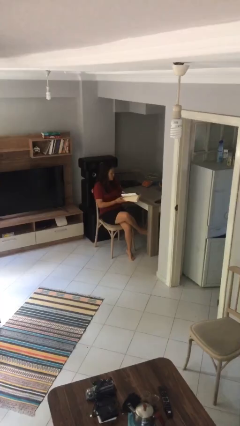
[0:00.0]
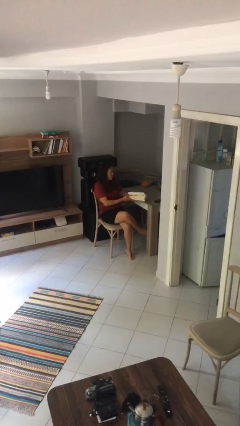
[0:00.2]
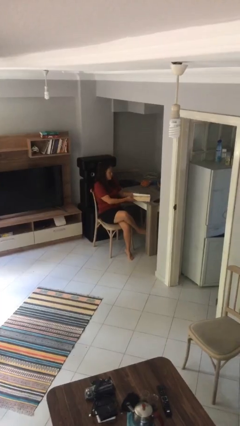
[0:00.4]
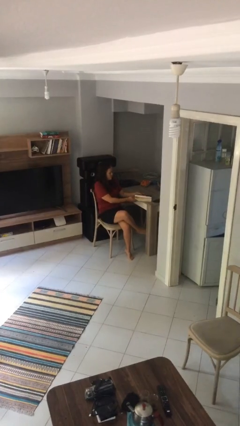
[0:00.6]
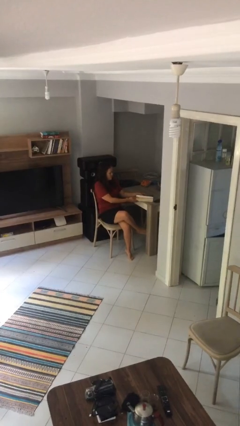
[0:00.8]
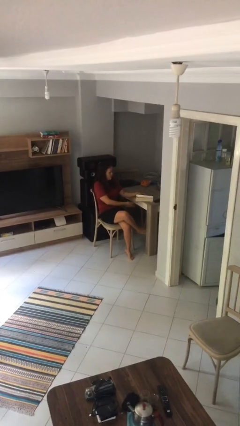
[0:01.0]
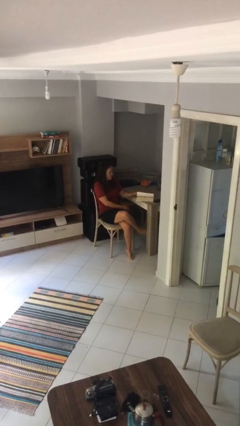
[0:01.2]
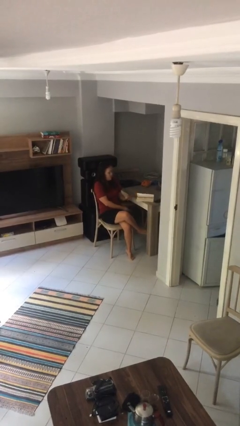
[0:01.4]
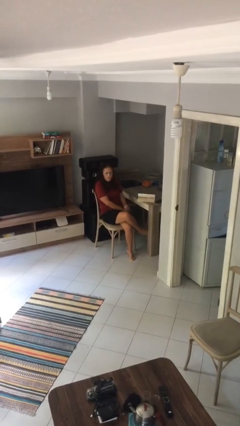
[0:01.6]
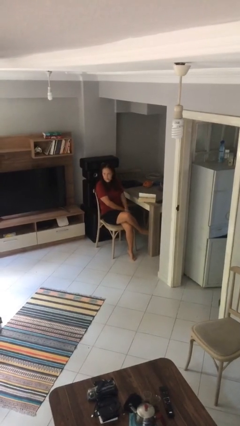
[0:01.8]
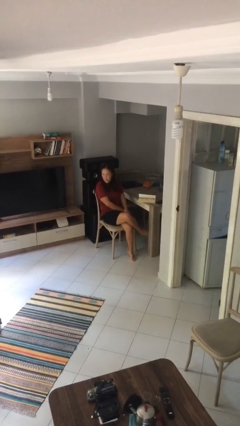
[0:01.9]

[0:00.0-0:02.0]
person puts down object on table

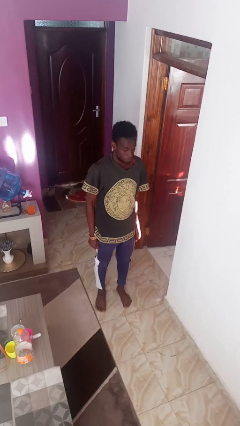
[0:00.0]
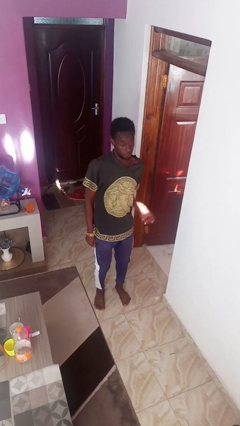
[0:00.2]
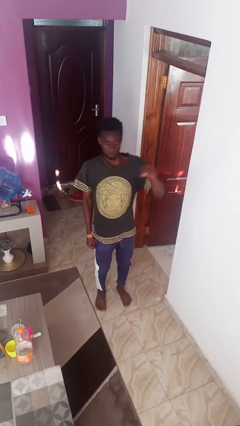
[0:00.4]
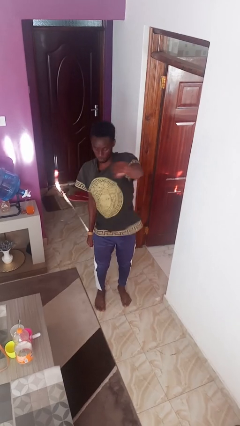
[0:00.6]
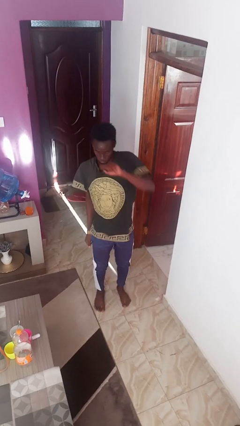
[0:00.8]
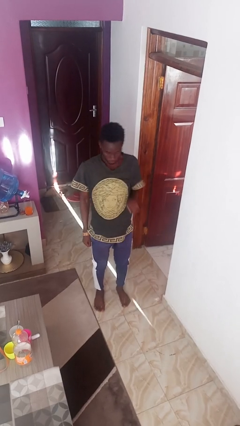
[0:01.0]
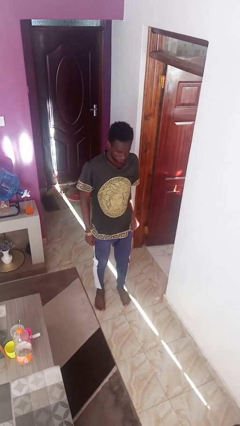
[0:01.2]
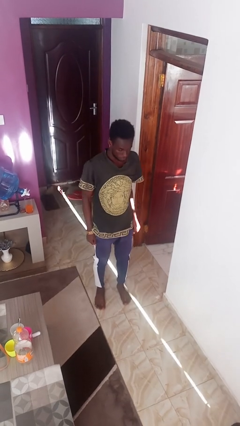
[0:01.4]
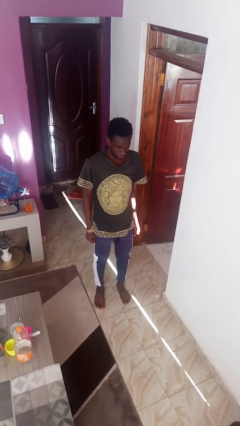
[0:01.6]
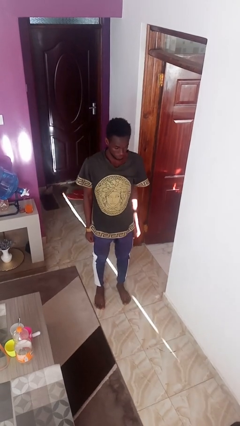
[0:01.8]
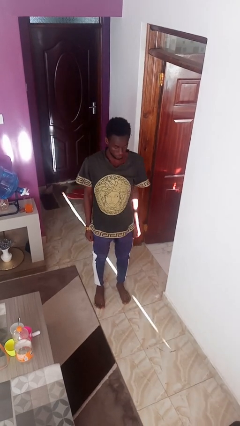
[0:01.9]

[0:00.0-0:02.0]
person punches

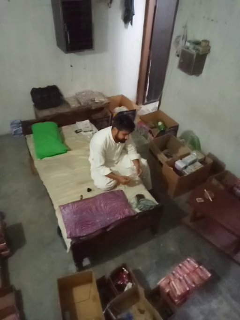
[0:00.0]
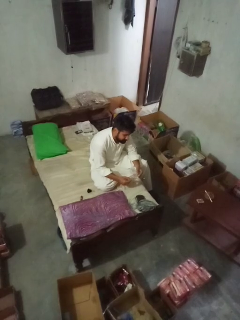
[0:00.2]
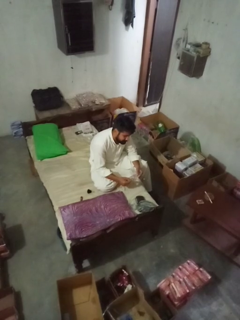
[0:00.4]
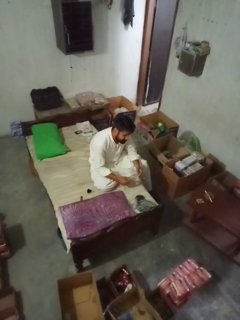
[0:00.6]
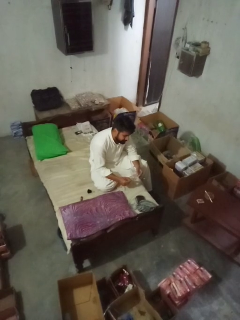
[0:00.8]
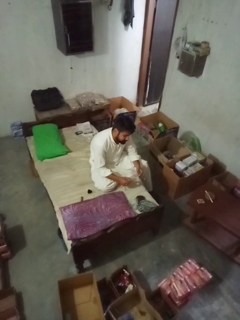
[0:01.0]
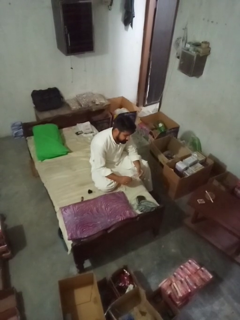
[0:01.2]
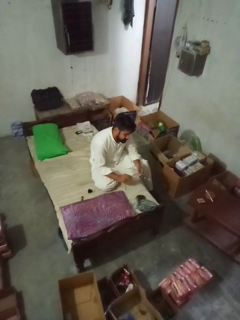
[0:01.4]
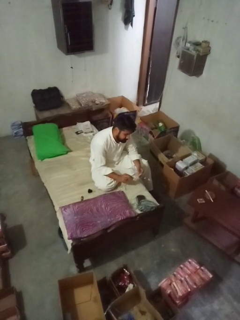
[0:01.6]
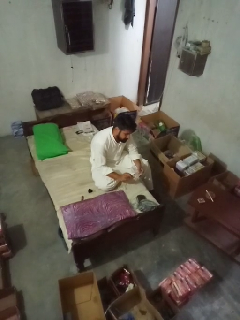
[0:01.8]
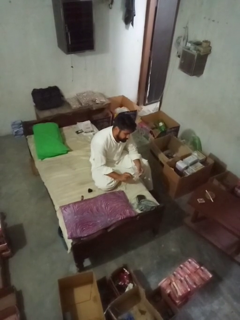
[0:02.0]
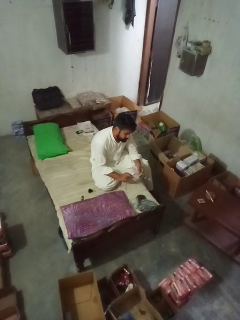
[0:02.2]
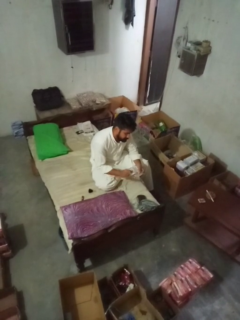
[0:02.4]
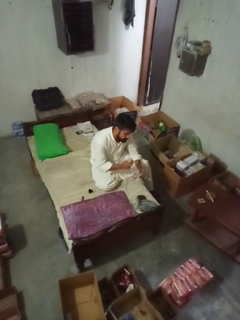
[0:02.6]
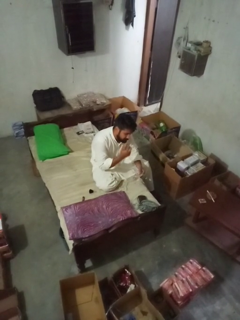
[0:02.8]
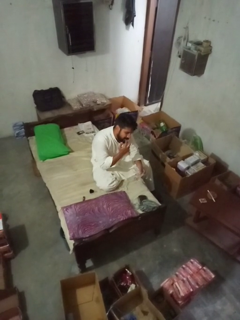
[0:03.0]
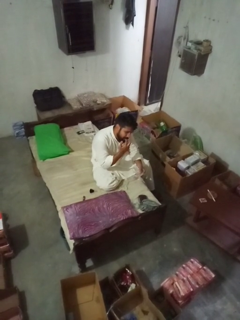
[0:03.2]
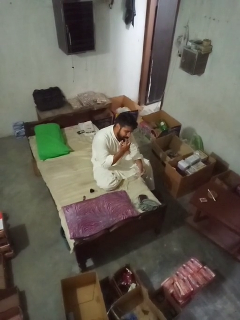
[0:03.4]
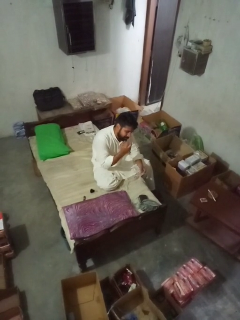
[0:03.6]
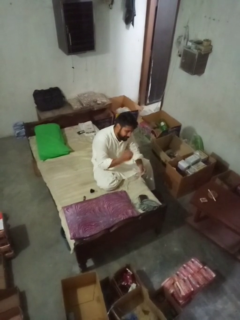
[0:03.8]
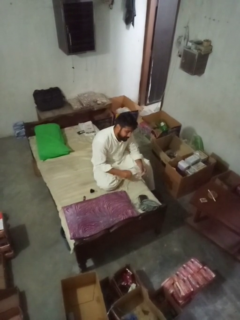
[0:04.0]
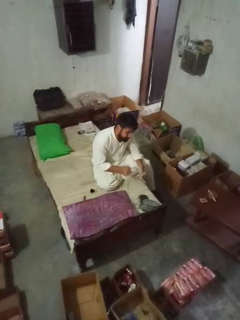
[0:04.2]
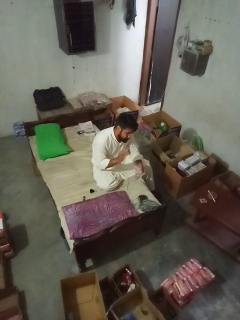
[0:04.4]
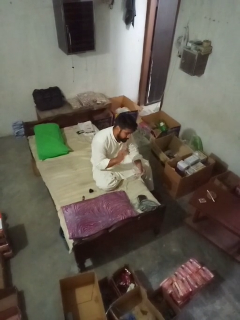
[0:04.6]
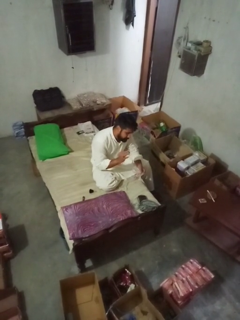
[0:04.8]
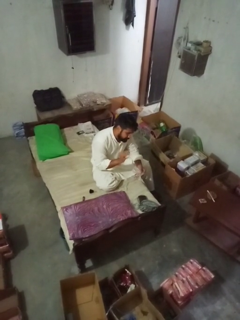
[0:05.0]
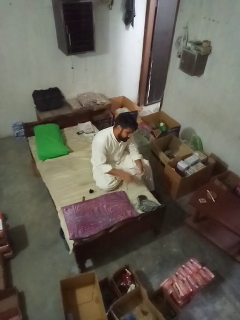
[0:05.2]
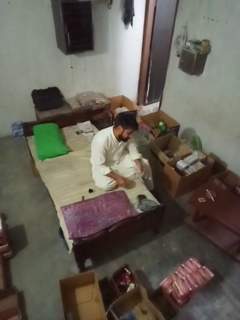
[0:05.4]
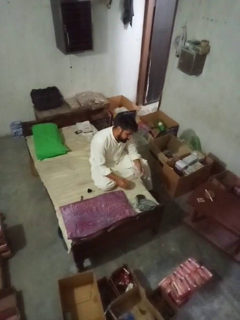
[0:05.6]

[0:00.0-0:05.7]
person licks fingers

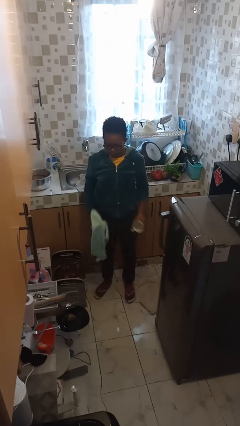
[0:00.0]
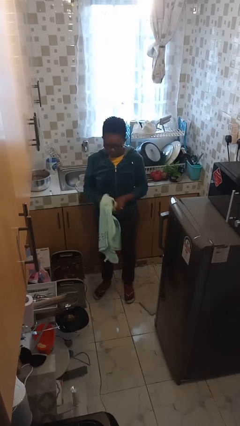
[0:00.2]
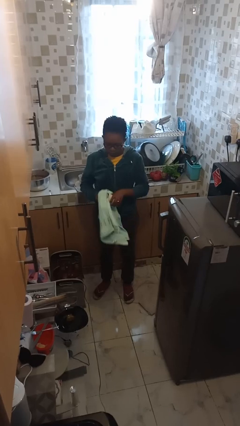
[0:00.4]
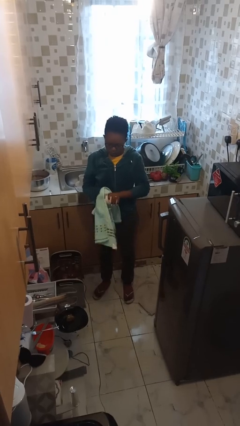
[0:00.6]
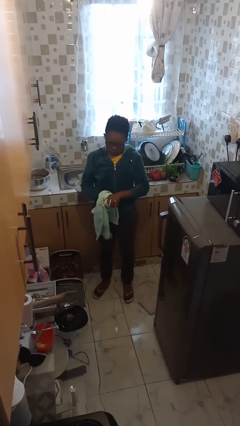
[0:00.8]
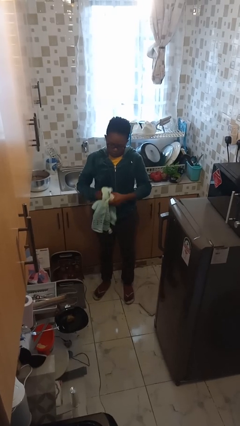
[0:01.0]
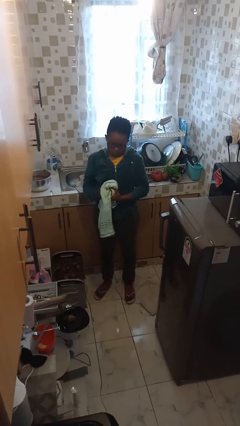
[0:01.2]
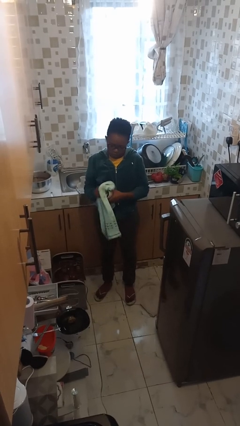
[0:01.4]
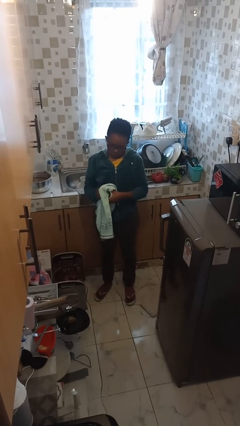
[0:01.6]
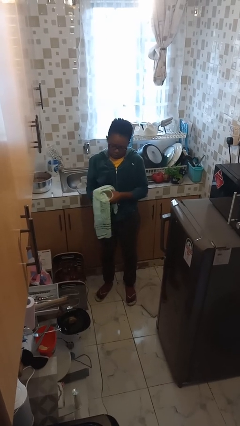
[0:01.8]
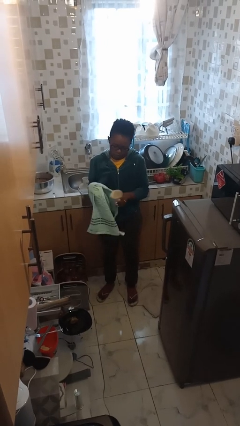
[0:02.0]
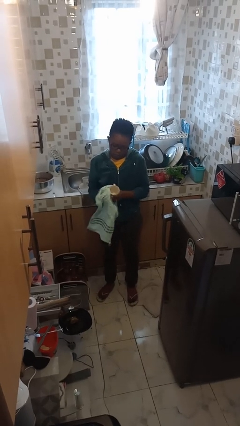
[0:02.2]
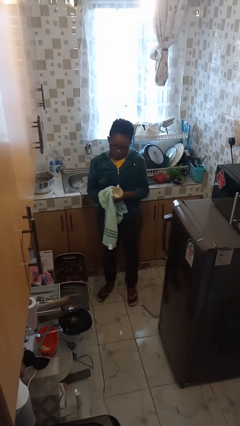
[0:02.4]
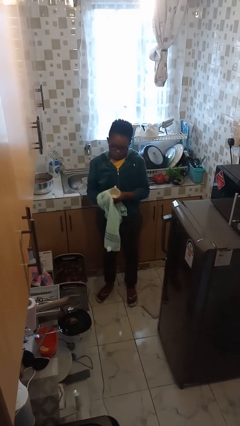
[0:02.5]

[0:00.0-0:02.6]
person dries dish

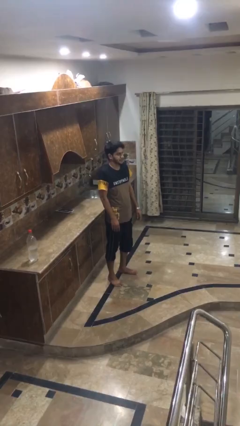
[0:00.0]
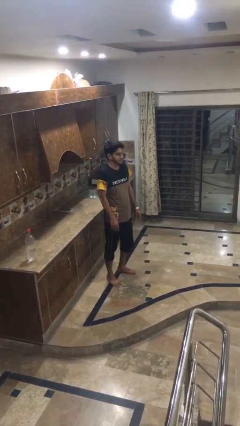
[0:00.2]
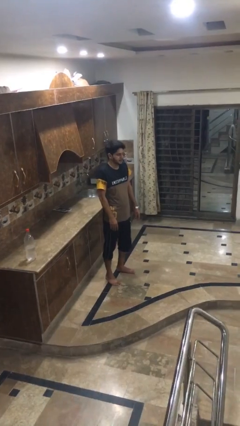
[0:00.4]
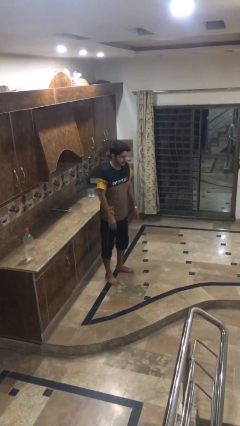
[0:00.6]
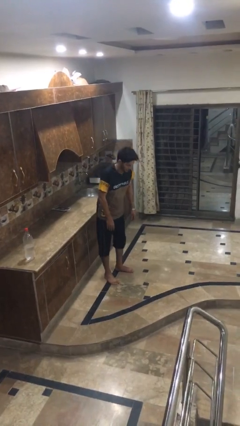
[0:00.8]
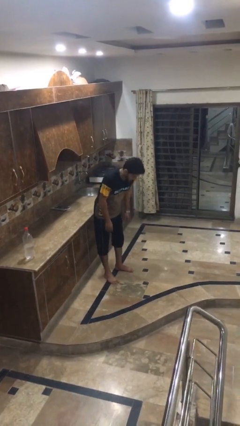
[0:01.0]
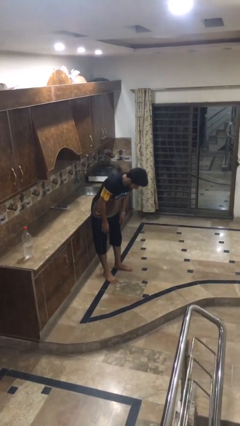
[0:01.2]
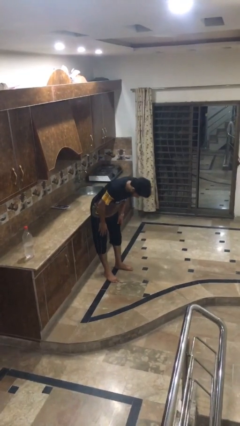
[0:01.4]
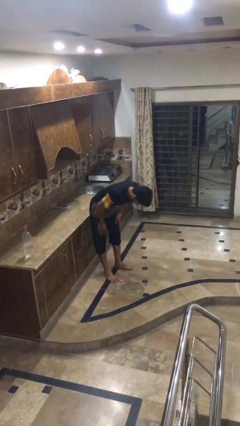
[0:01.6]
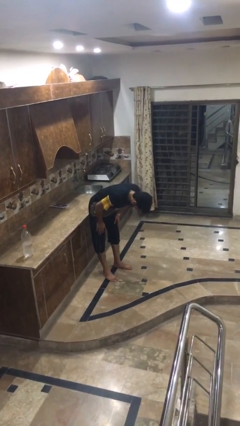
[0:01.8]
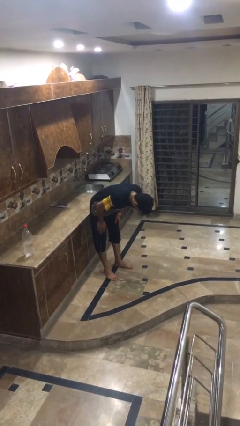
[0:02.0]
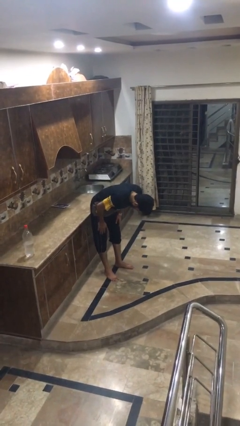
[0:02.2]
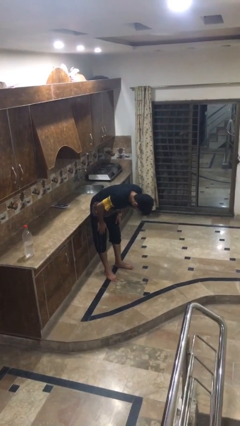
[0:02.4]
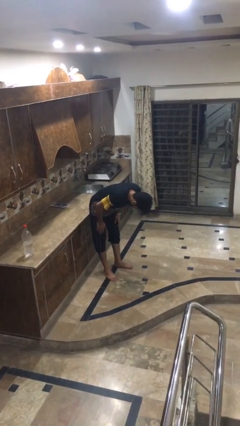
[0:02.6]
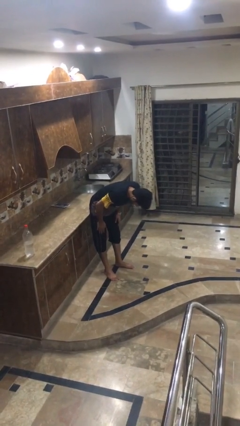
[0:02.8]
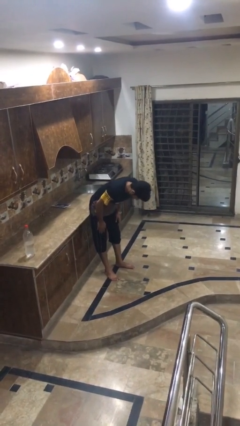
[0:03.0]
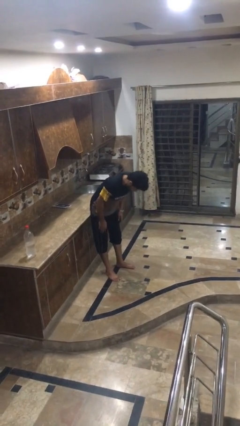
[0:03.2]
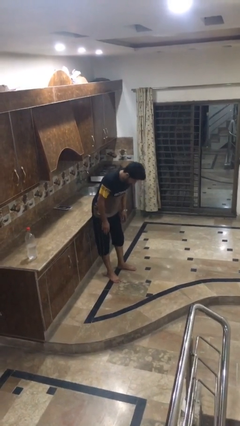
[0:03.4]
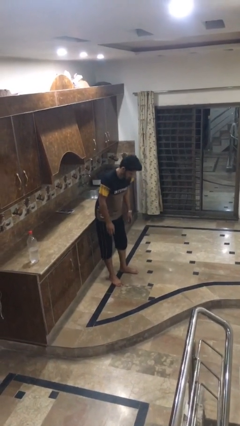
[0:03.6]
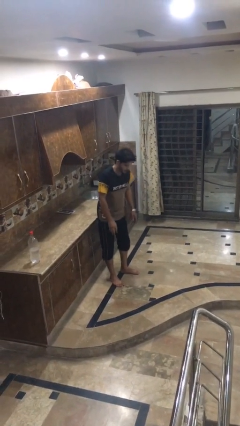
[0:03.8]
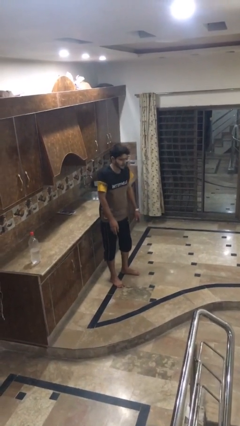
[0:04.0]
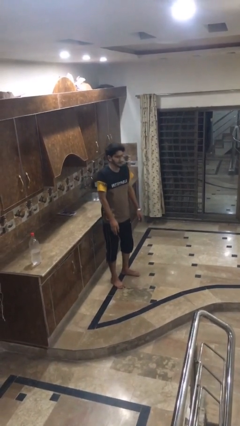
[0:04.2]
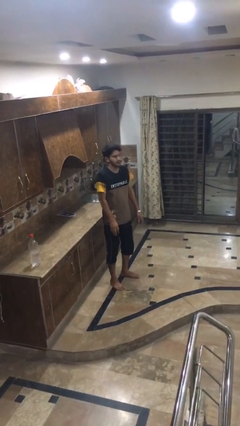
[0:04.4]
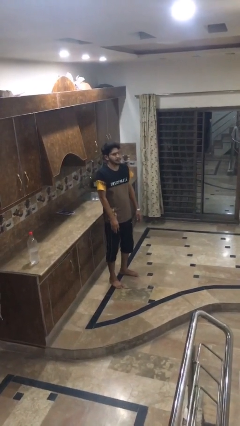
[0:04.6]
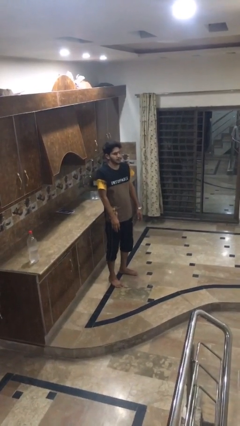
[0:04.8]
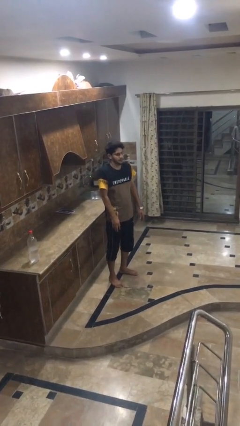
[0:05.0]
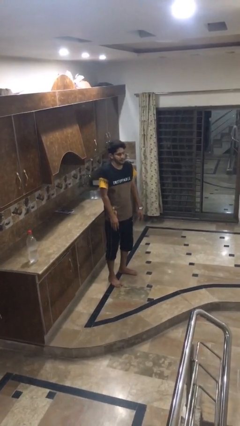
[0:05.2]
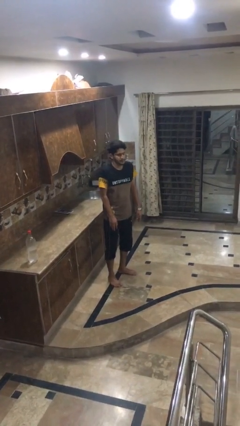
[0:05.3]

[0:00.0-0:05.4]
person bows

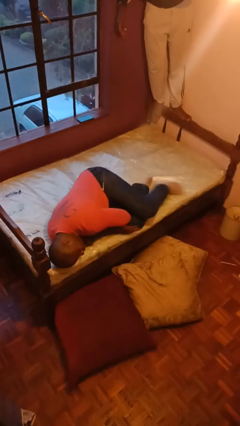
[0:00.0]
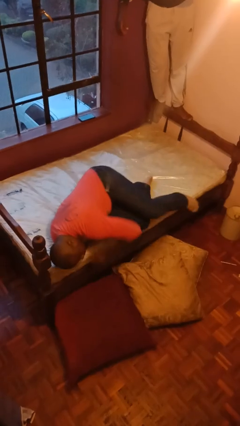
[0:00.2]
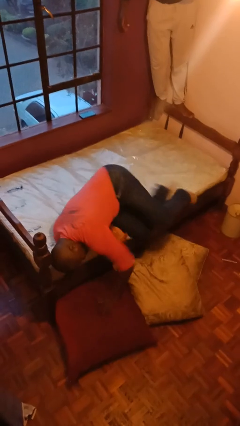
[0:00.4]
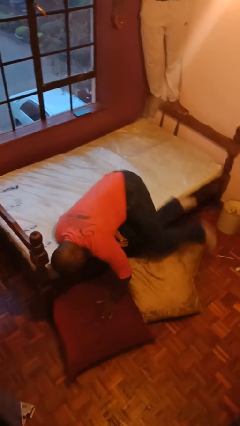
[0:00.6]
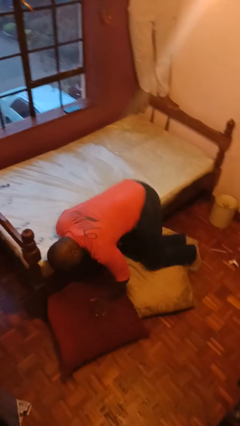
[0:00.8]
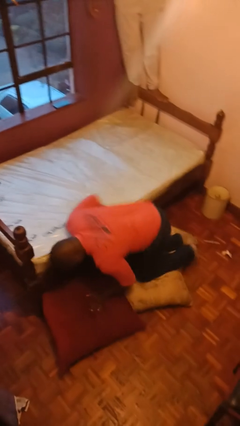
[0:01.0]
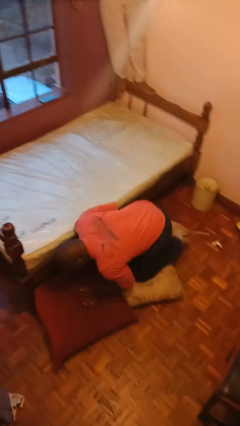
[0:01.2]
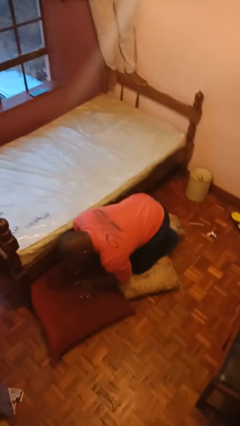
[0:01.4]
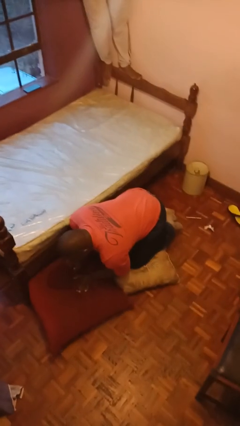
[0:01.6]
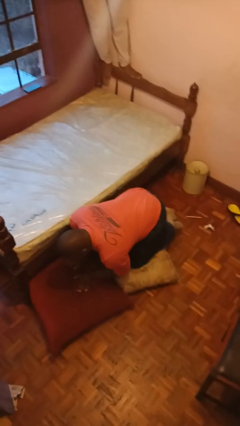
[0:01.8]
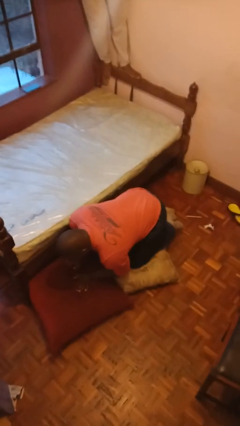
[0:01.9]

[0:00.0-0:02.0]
person falls from bed
